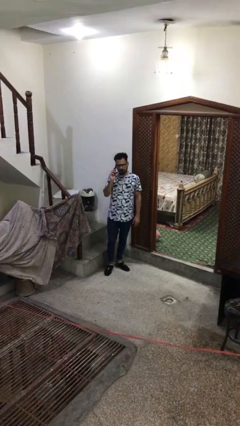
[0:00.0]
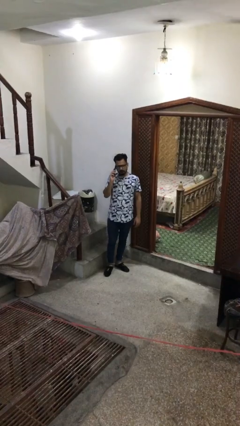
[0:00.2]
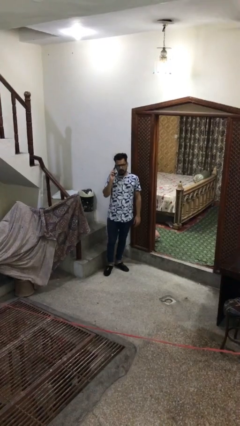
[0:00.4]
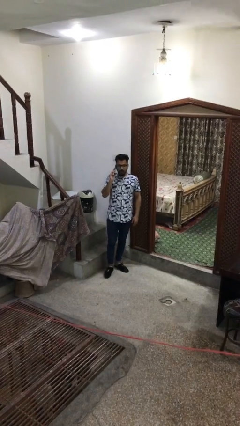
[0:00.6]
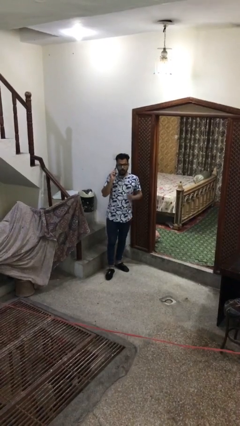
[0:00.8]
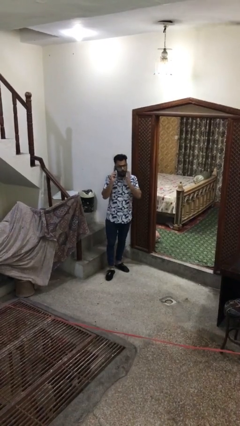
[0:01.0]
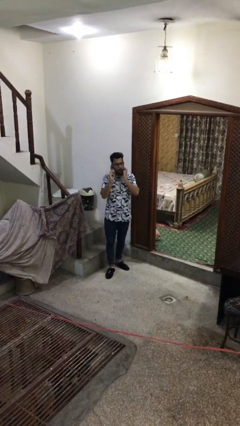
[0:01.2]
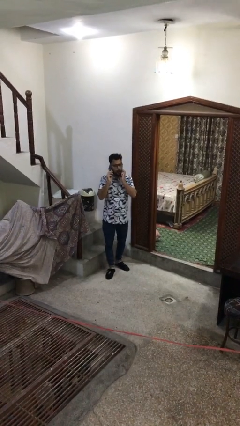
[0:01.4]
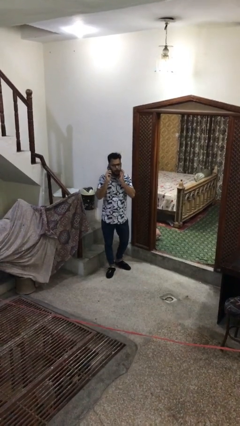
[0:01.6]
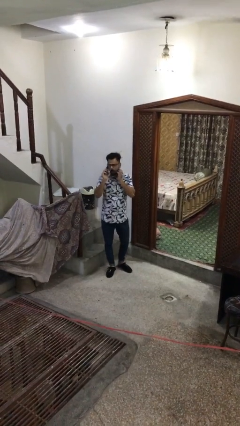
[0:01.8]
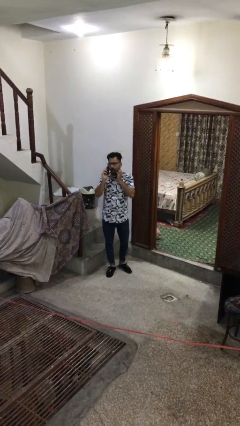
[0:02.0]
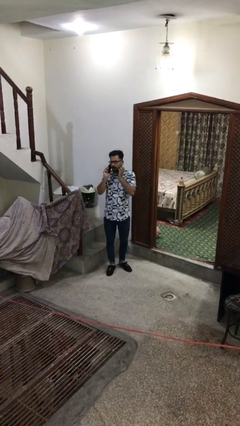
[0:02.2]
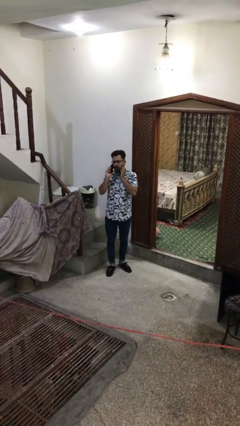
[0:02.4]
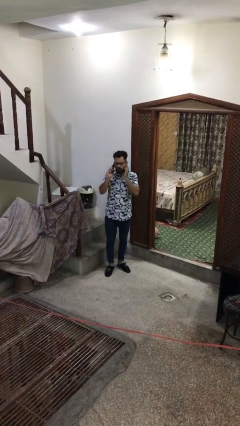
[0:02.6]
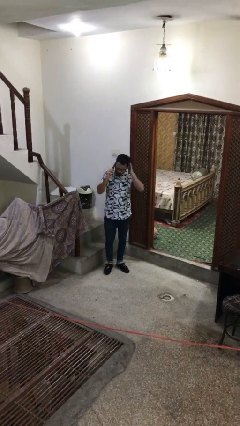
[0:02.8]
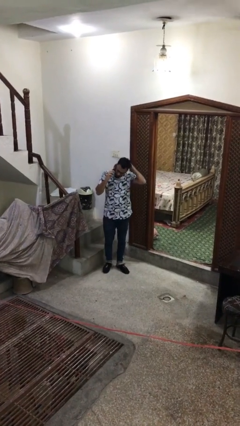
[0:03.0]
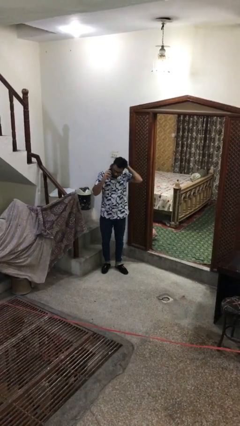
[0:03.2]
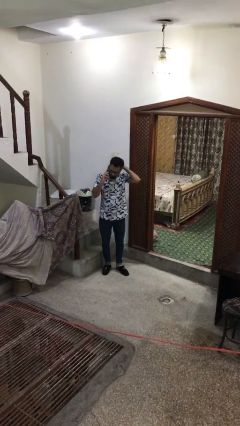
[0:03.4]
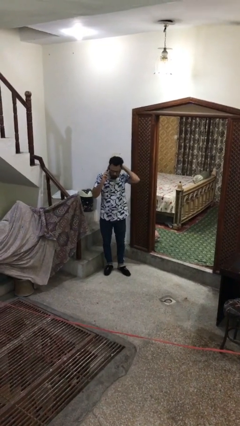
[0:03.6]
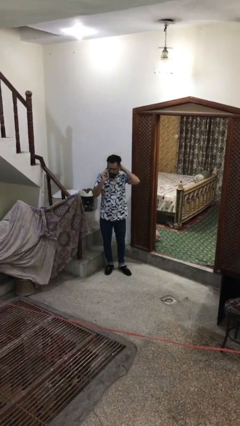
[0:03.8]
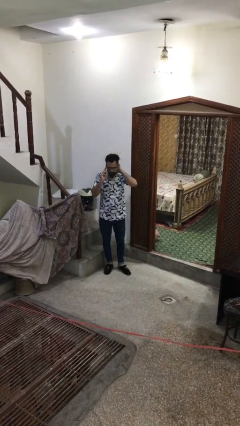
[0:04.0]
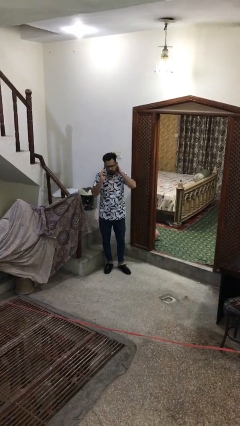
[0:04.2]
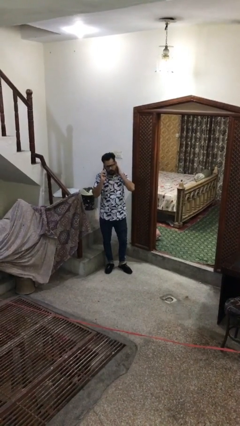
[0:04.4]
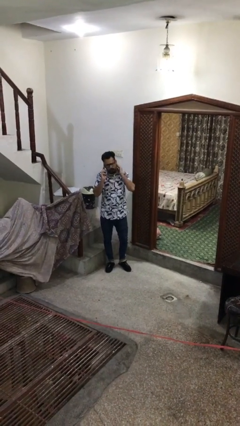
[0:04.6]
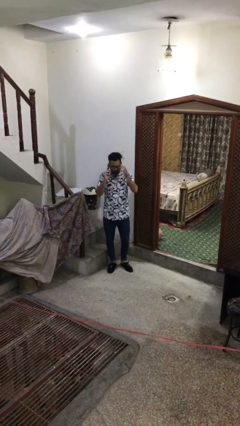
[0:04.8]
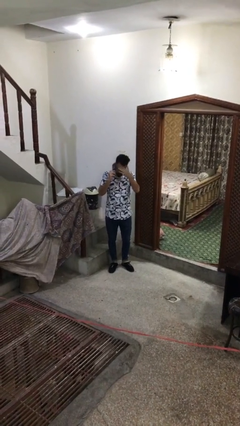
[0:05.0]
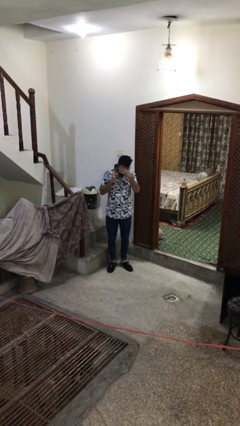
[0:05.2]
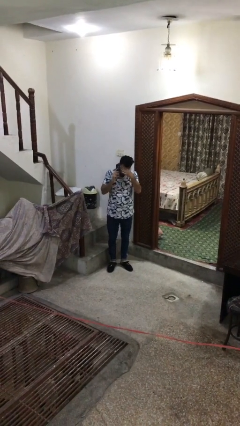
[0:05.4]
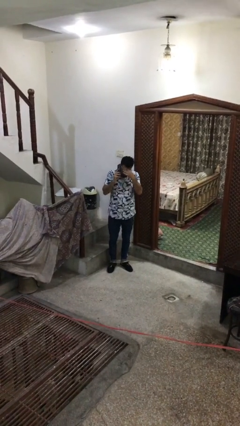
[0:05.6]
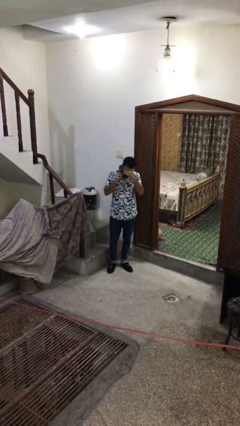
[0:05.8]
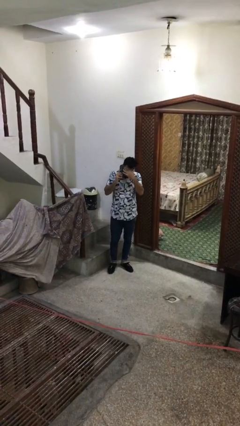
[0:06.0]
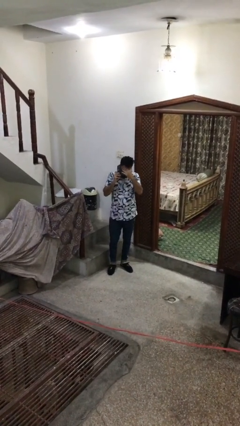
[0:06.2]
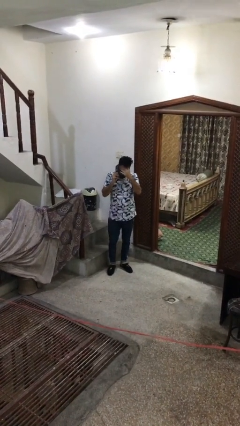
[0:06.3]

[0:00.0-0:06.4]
person talks on phone

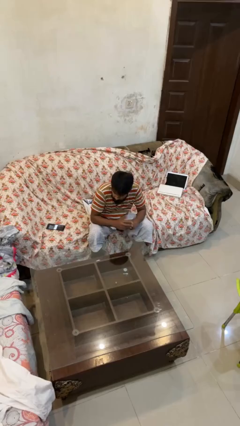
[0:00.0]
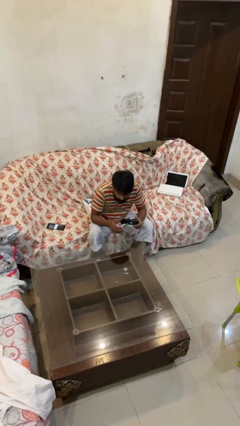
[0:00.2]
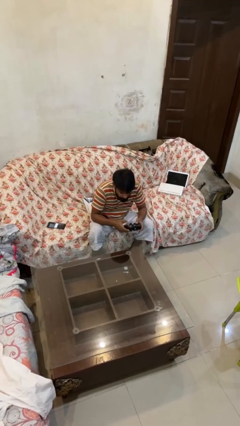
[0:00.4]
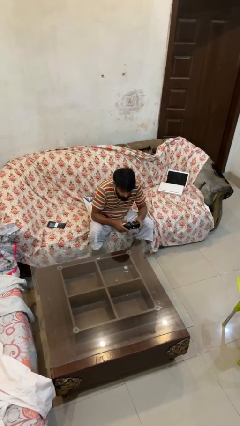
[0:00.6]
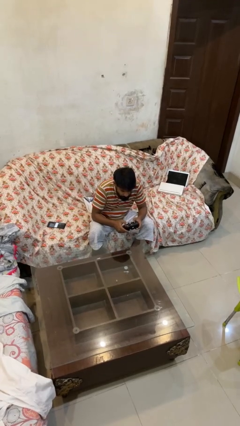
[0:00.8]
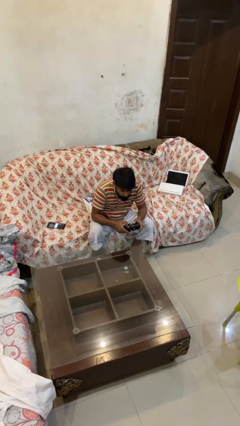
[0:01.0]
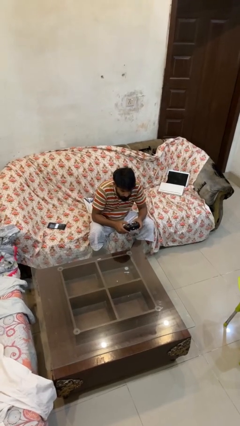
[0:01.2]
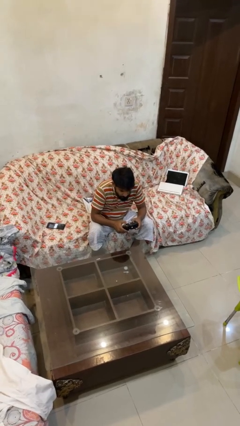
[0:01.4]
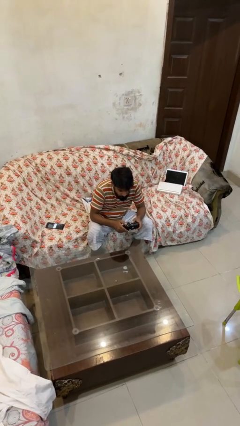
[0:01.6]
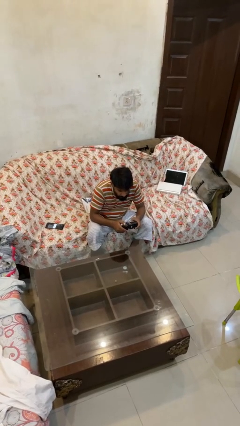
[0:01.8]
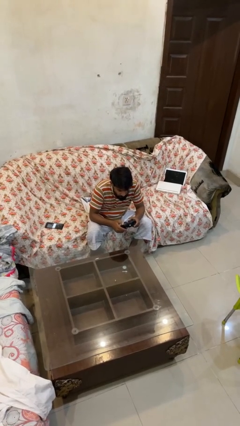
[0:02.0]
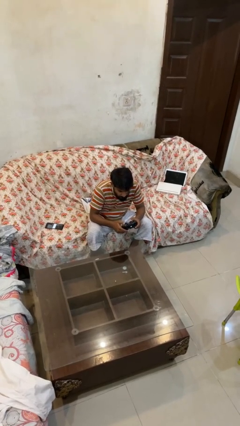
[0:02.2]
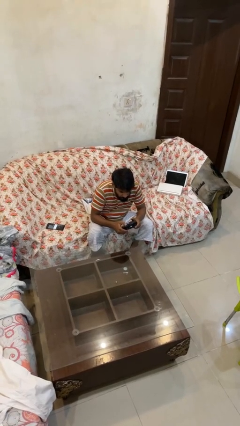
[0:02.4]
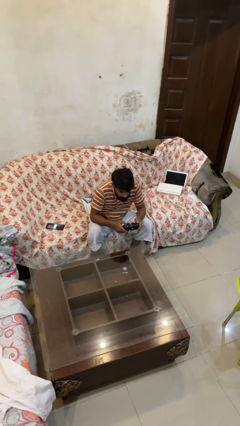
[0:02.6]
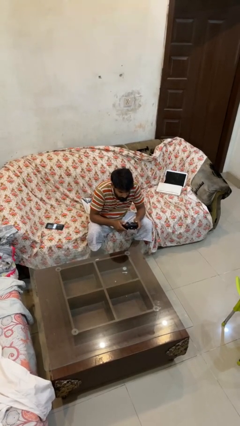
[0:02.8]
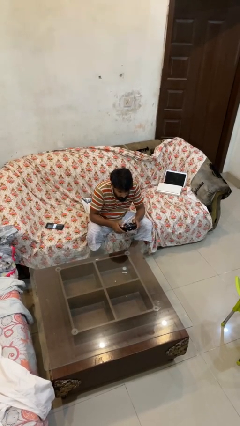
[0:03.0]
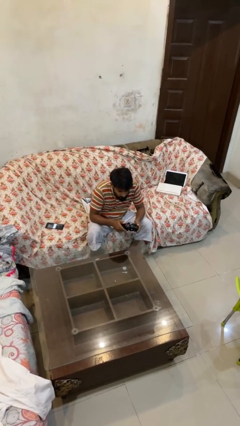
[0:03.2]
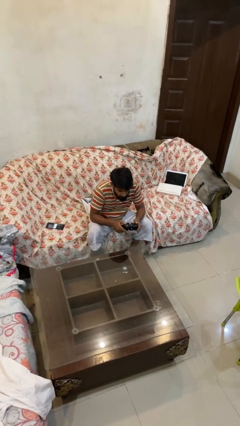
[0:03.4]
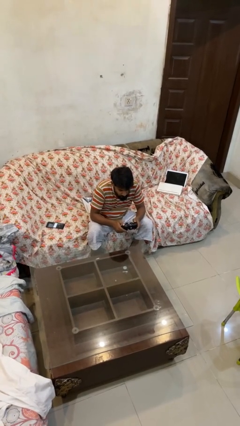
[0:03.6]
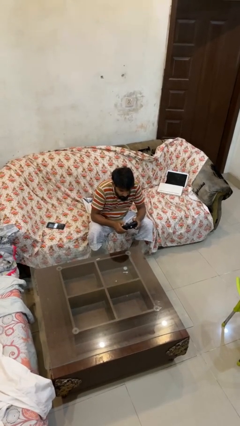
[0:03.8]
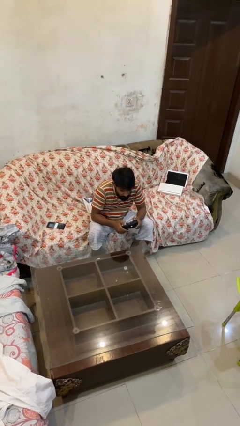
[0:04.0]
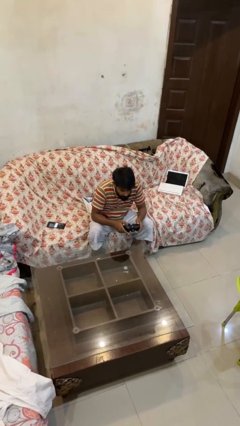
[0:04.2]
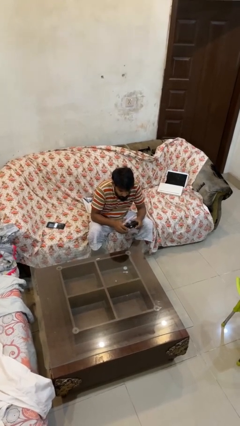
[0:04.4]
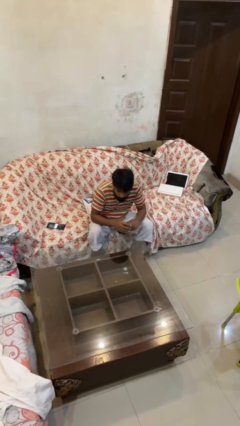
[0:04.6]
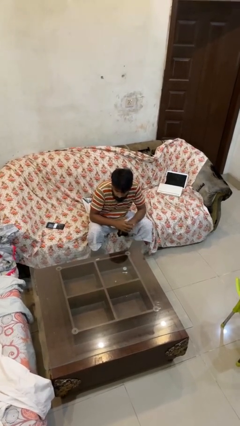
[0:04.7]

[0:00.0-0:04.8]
person interacts with handheld game

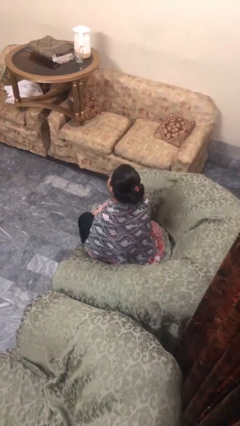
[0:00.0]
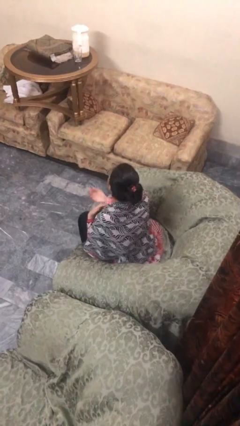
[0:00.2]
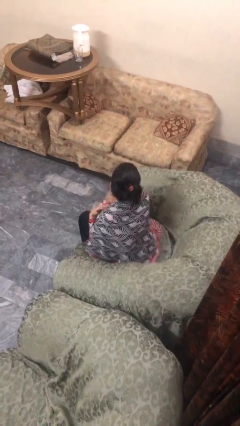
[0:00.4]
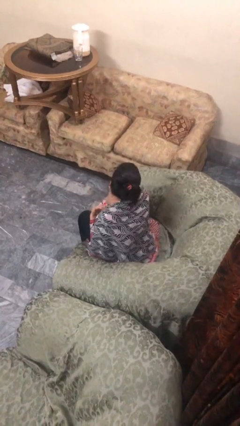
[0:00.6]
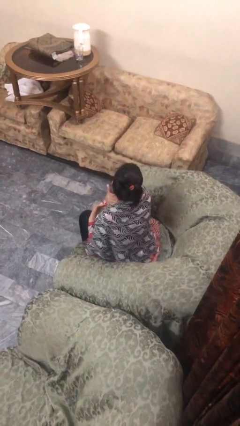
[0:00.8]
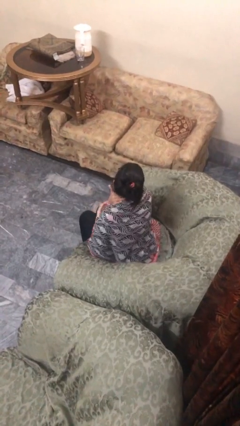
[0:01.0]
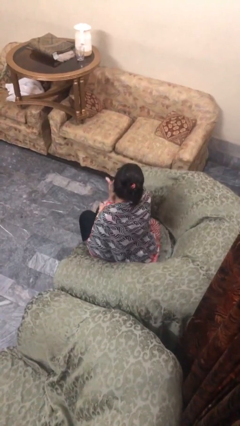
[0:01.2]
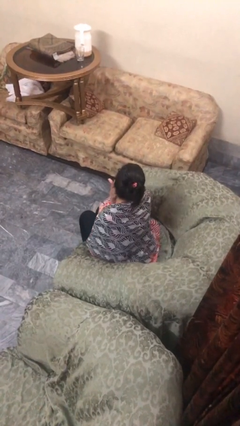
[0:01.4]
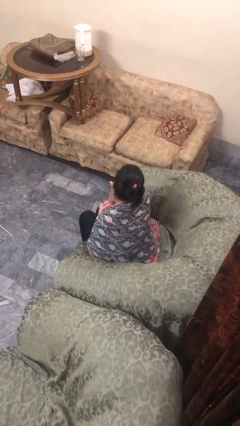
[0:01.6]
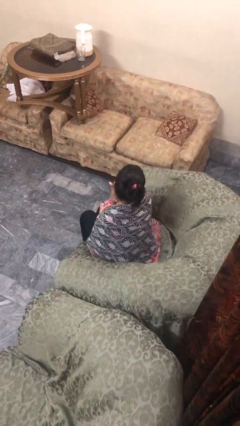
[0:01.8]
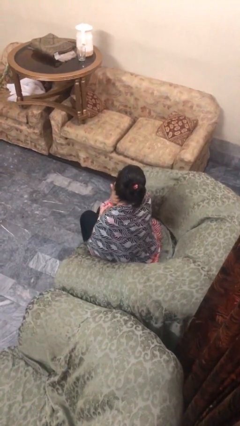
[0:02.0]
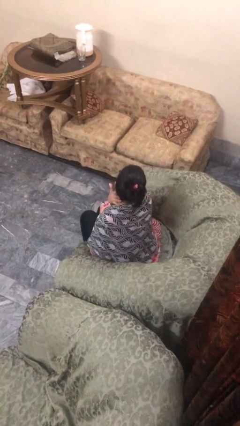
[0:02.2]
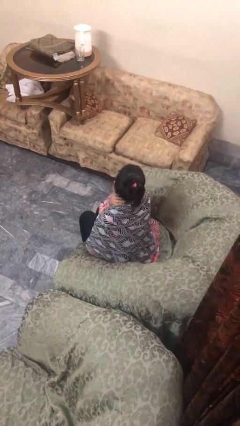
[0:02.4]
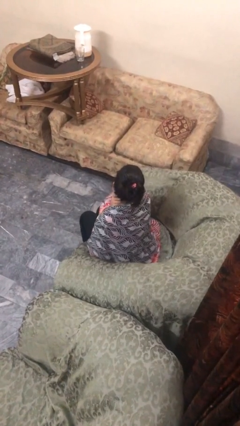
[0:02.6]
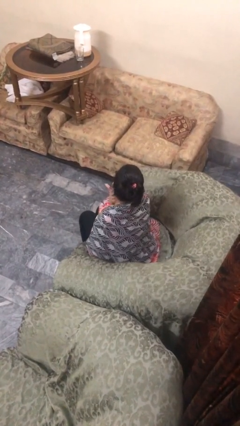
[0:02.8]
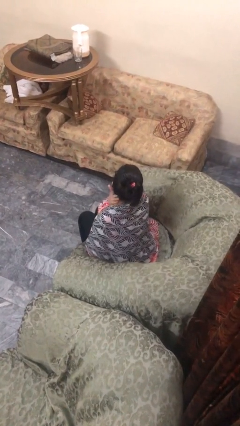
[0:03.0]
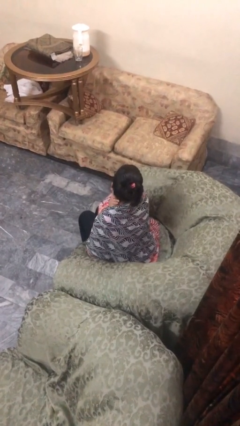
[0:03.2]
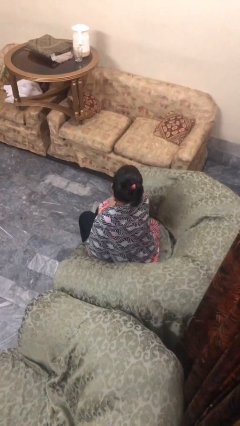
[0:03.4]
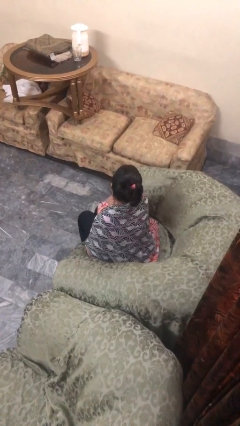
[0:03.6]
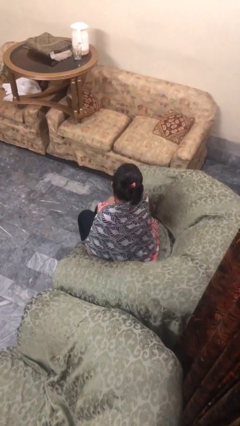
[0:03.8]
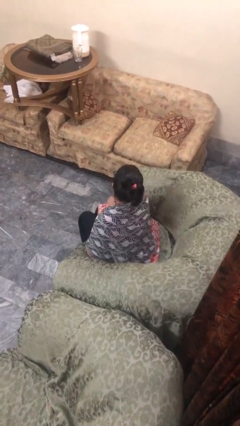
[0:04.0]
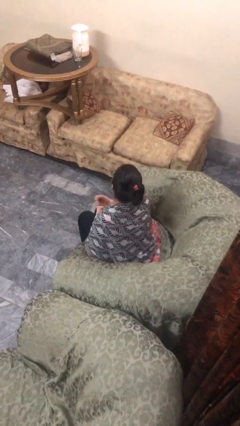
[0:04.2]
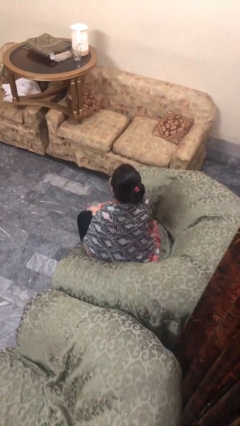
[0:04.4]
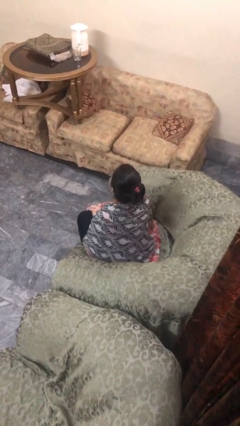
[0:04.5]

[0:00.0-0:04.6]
person rubs neck

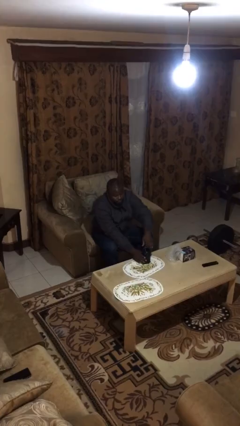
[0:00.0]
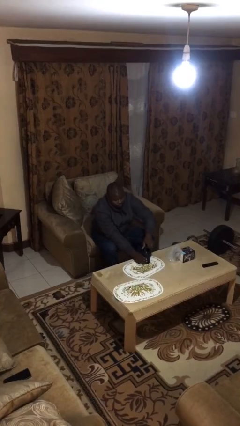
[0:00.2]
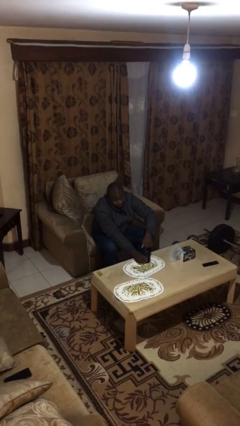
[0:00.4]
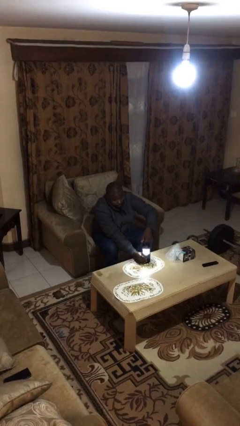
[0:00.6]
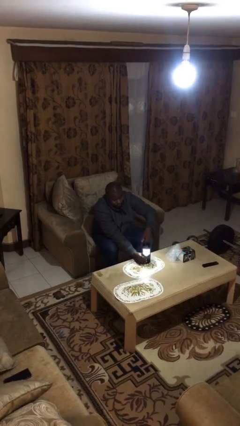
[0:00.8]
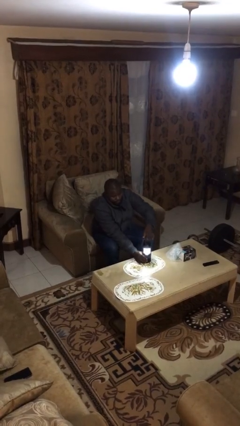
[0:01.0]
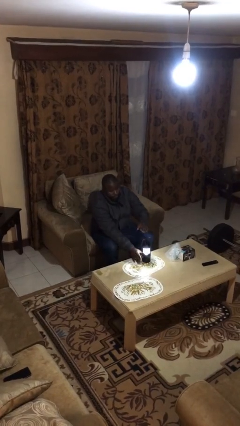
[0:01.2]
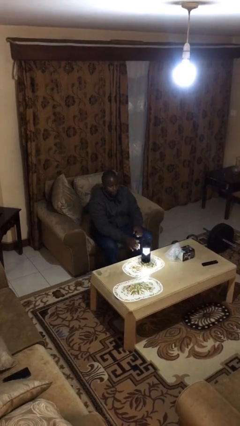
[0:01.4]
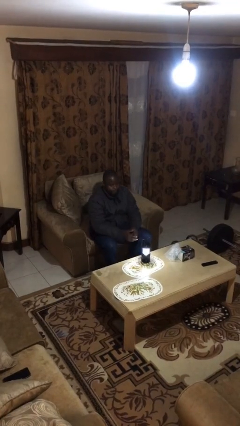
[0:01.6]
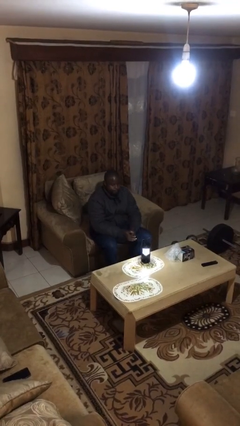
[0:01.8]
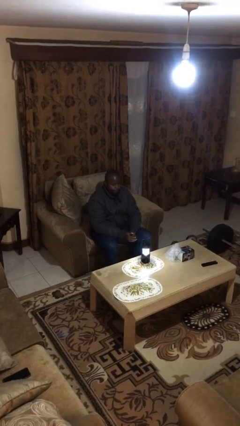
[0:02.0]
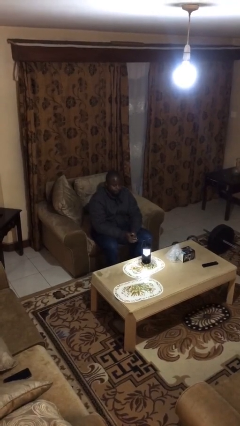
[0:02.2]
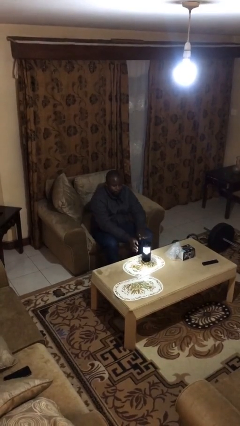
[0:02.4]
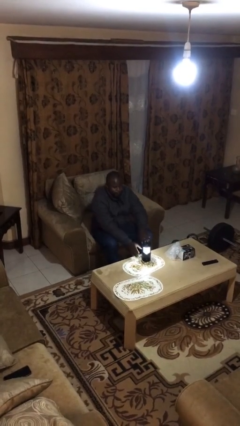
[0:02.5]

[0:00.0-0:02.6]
person turns on lamp
